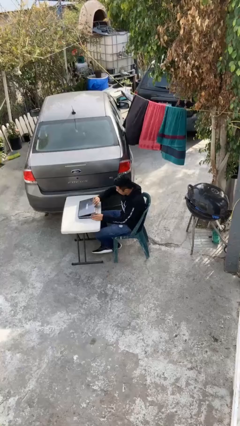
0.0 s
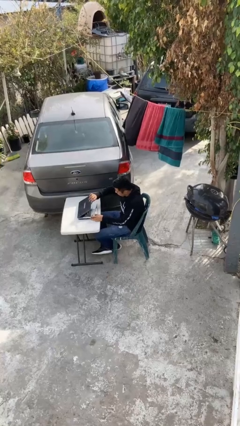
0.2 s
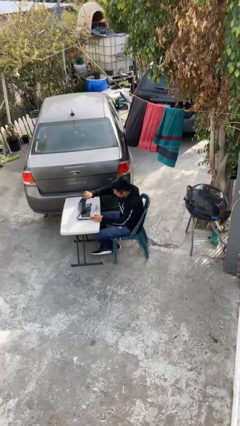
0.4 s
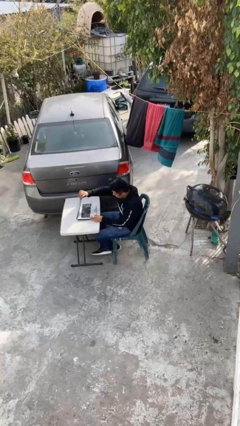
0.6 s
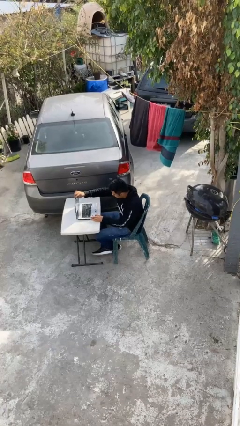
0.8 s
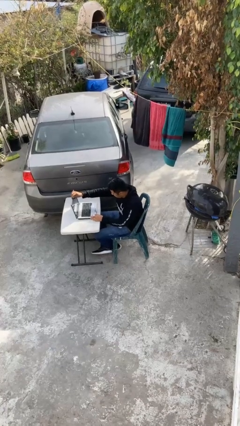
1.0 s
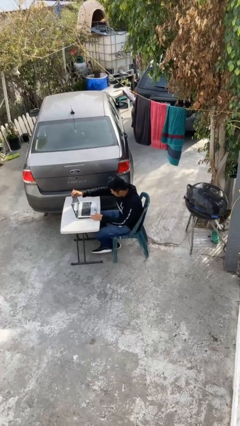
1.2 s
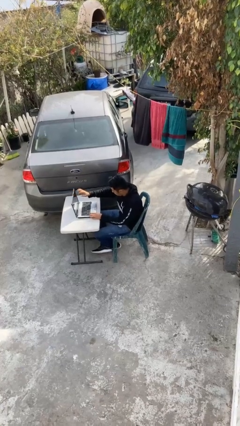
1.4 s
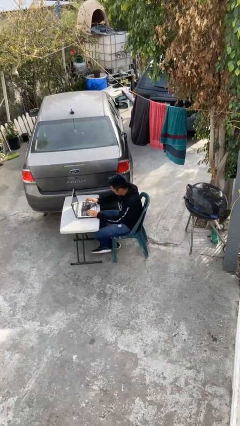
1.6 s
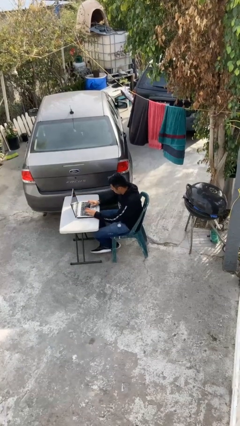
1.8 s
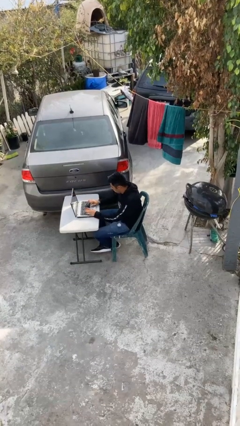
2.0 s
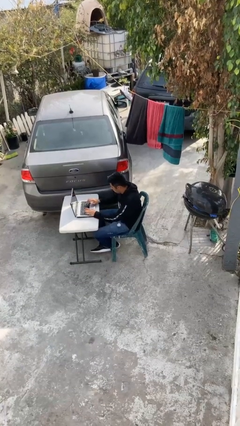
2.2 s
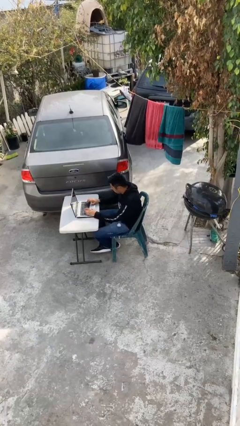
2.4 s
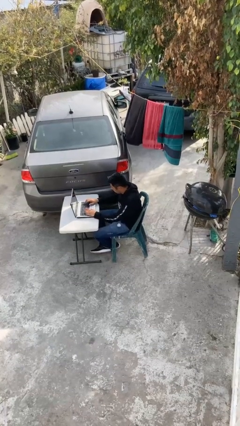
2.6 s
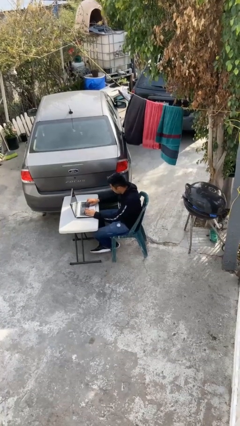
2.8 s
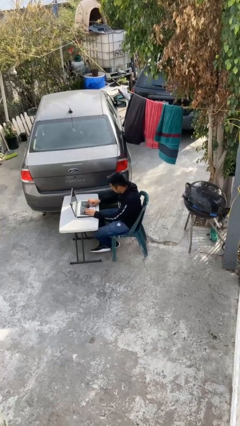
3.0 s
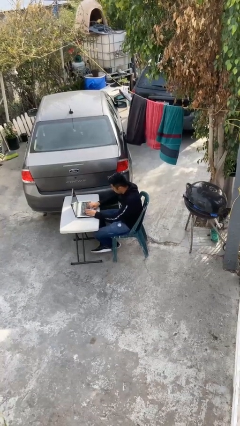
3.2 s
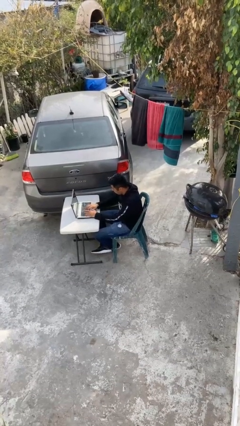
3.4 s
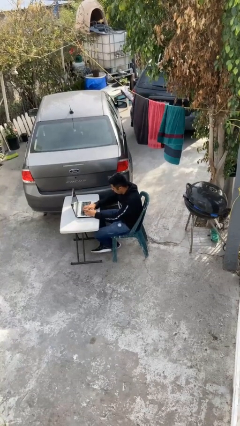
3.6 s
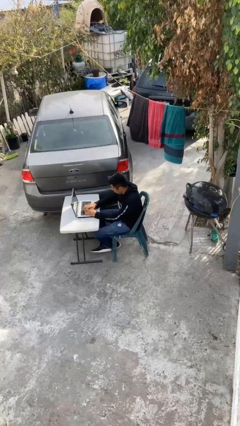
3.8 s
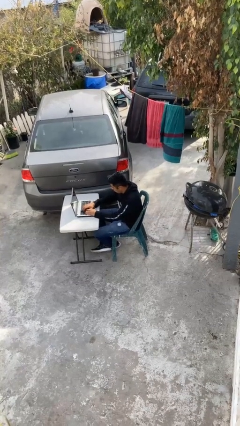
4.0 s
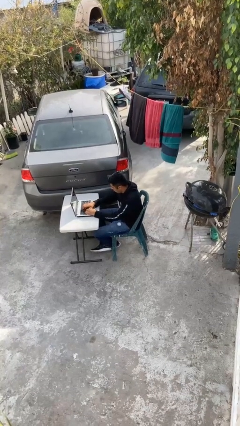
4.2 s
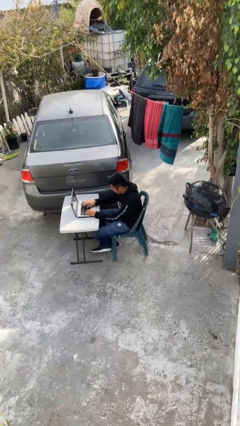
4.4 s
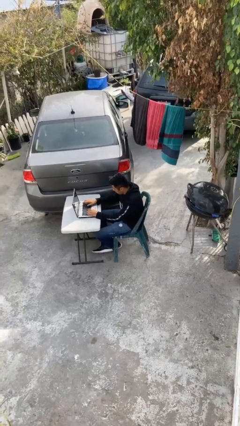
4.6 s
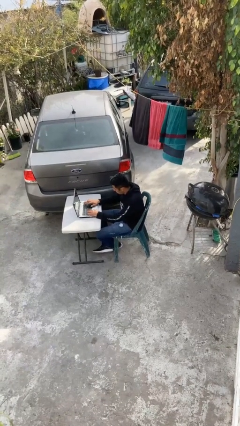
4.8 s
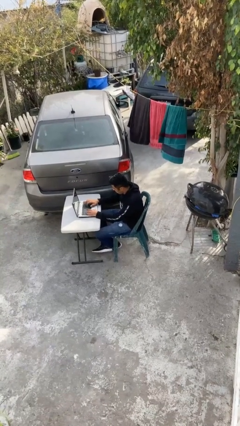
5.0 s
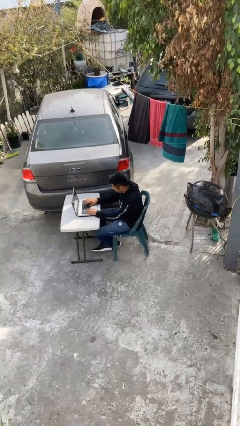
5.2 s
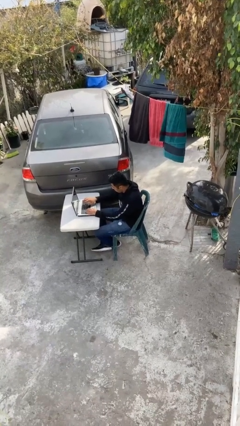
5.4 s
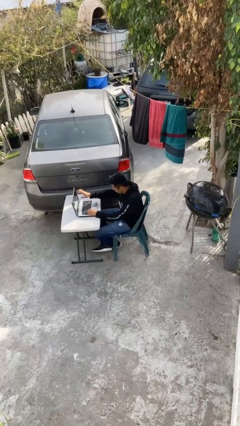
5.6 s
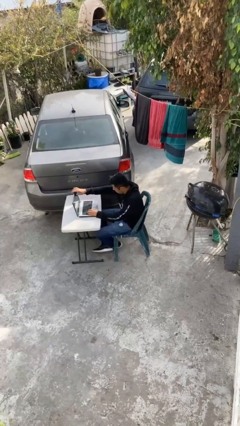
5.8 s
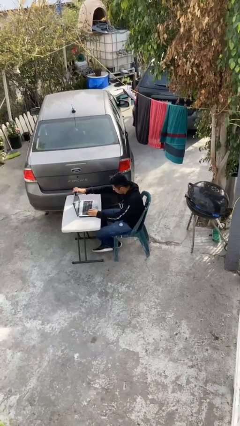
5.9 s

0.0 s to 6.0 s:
person interacts with laptop

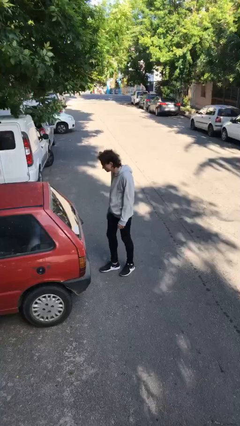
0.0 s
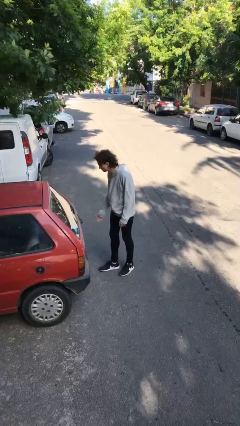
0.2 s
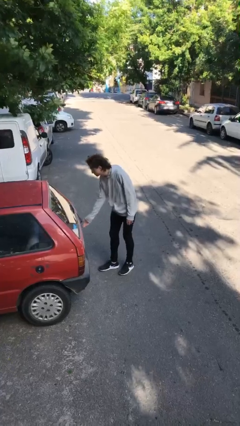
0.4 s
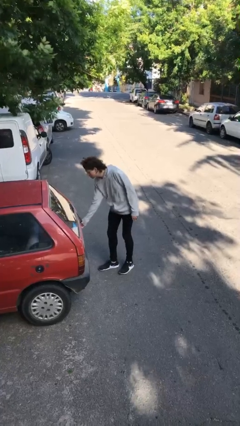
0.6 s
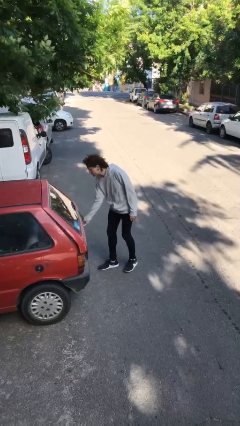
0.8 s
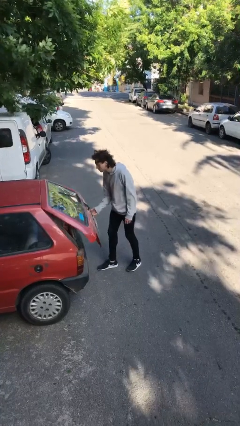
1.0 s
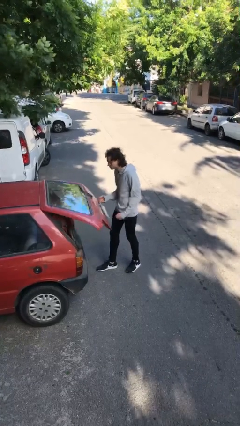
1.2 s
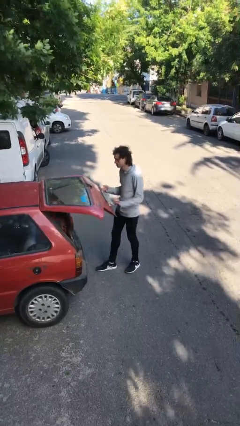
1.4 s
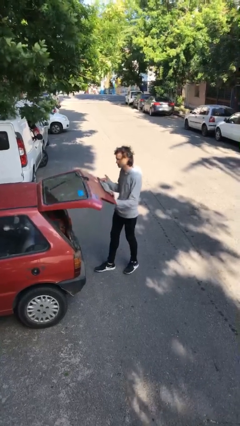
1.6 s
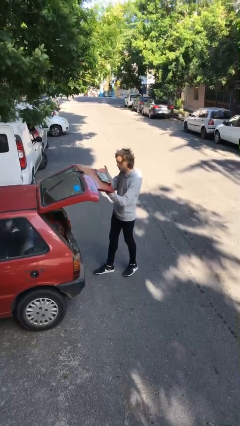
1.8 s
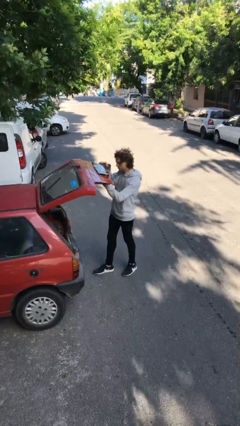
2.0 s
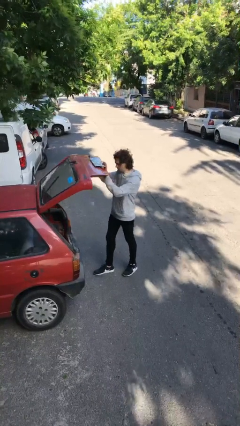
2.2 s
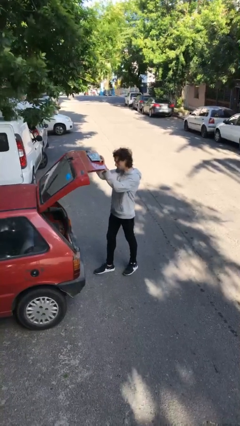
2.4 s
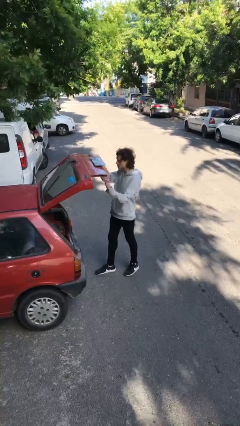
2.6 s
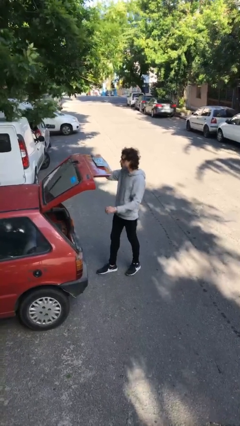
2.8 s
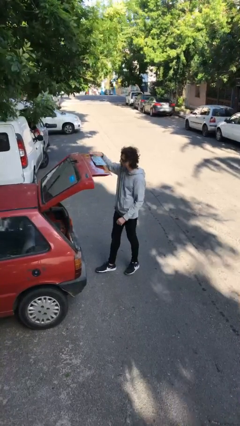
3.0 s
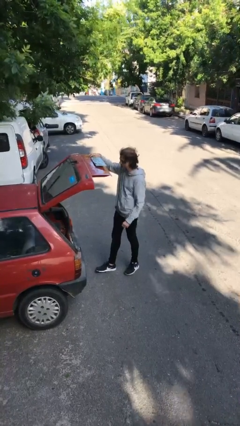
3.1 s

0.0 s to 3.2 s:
person opens car trunk

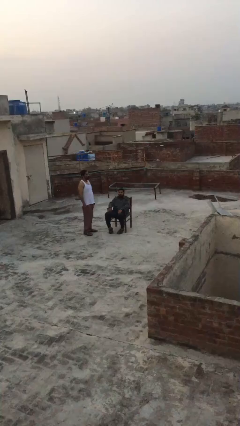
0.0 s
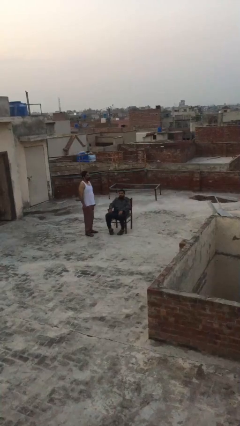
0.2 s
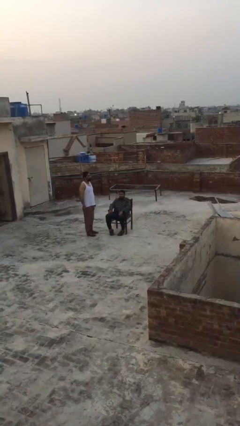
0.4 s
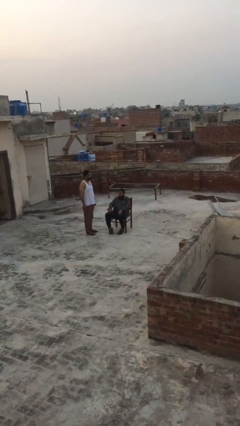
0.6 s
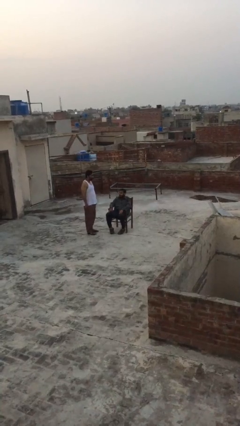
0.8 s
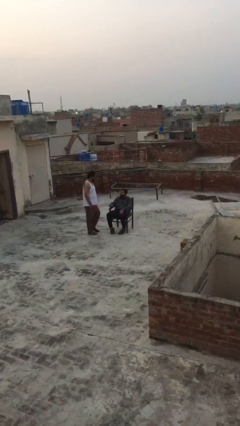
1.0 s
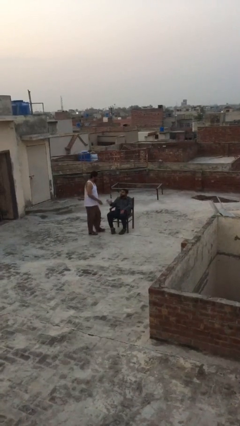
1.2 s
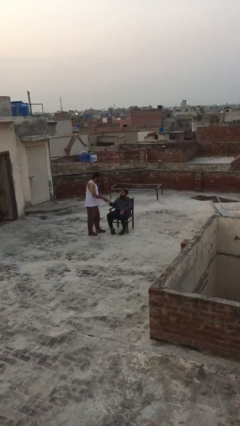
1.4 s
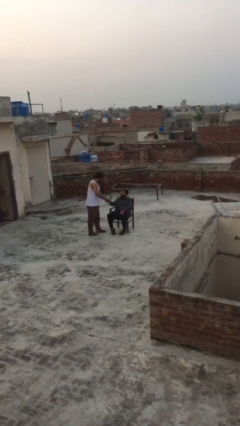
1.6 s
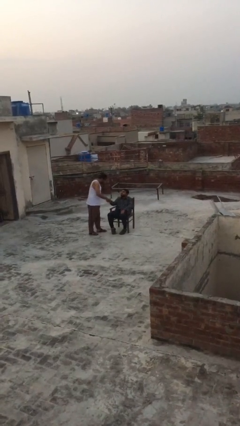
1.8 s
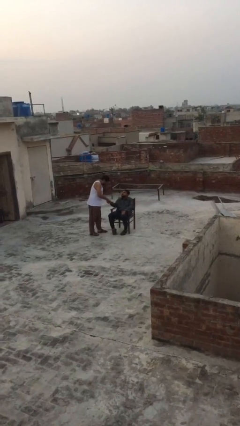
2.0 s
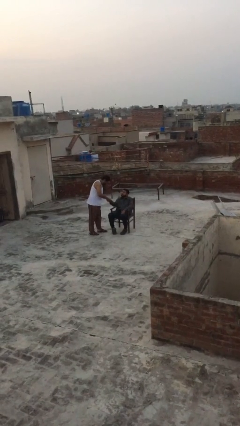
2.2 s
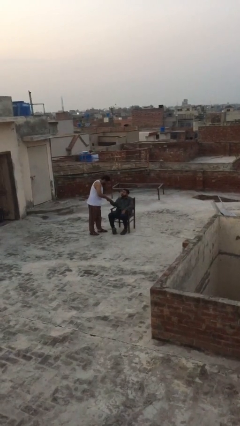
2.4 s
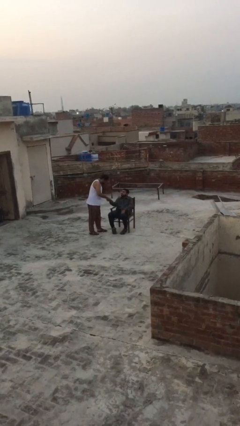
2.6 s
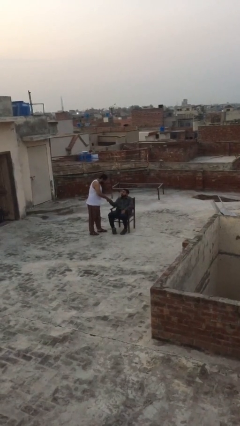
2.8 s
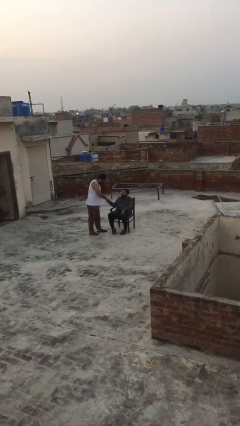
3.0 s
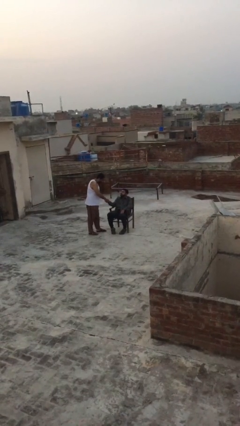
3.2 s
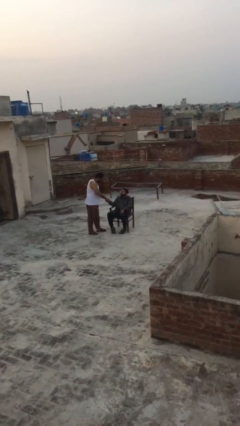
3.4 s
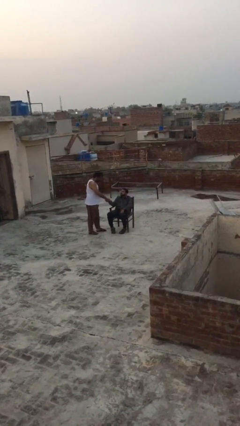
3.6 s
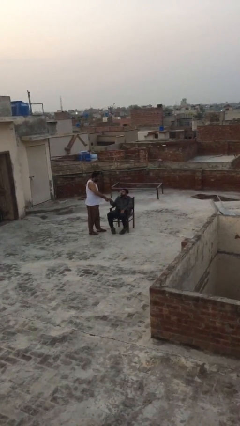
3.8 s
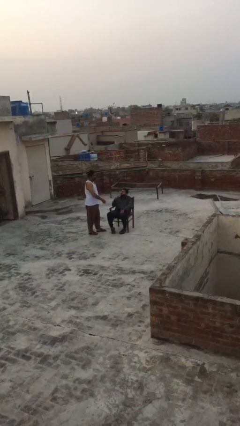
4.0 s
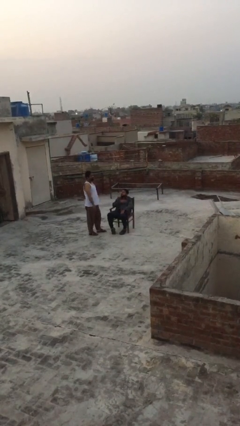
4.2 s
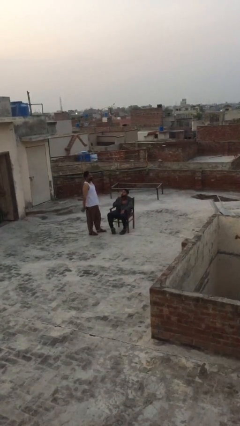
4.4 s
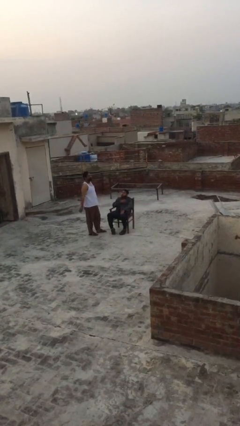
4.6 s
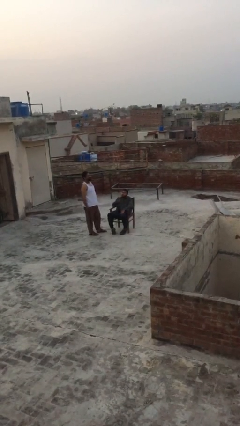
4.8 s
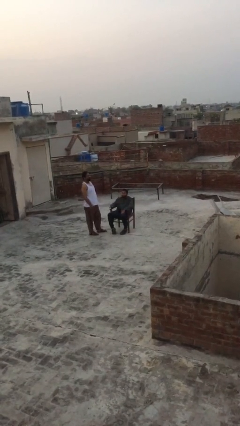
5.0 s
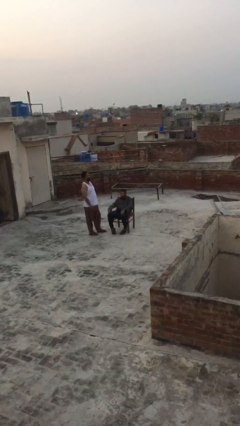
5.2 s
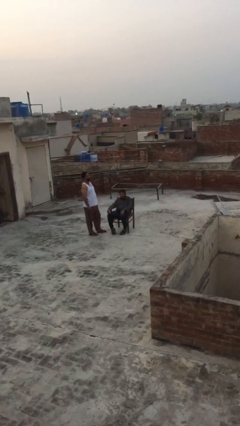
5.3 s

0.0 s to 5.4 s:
person shakes hand

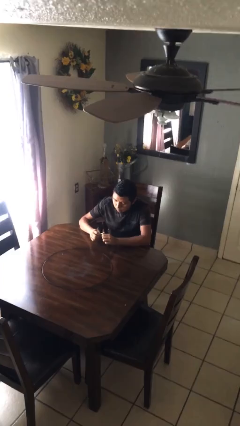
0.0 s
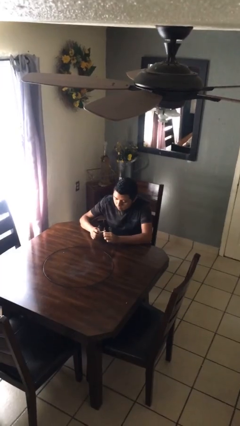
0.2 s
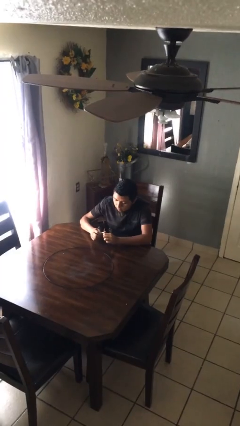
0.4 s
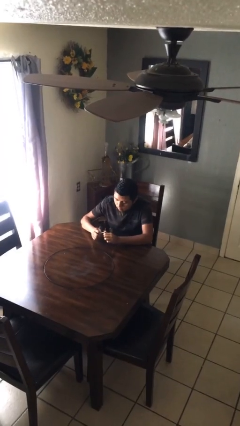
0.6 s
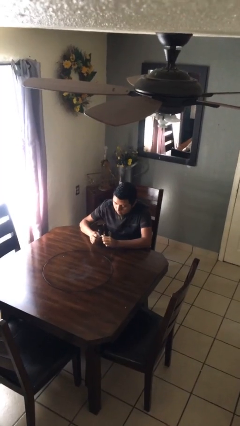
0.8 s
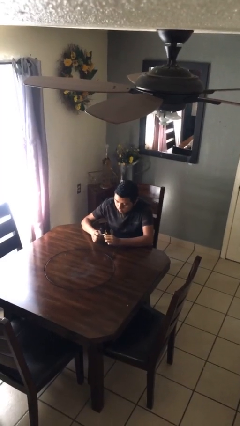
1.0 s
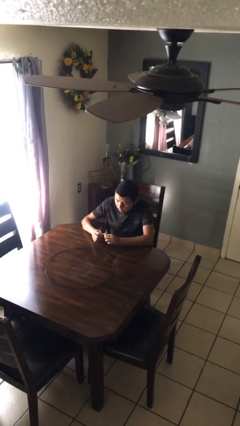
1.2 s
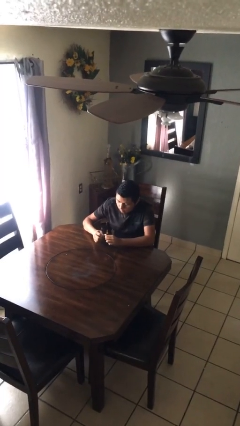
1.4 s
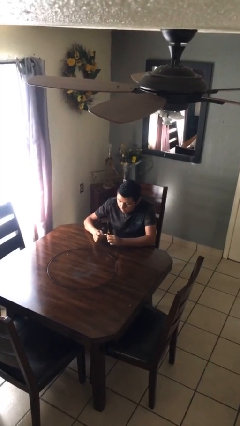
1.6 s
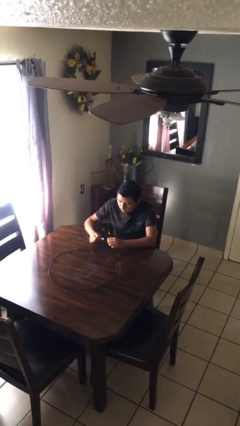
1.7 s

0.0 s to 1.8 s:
person files fingernails

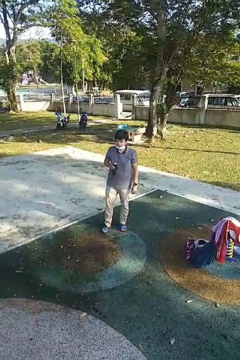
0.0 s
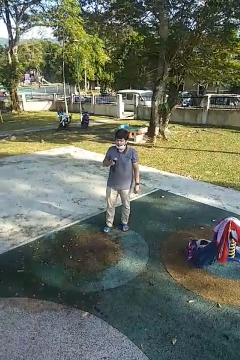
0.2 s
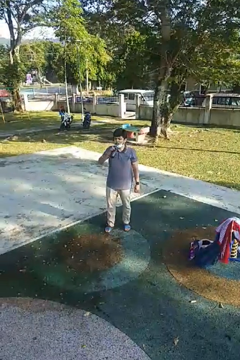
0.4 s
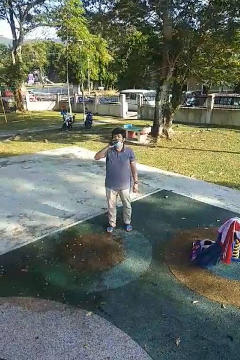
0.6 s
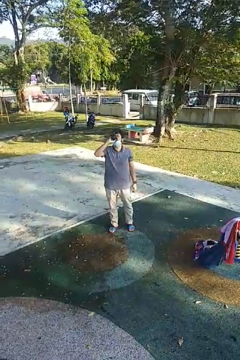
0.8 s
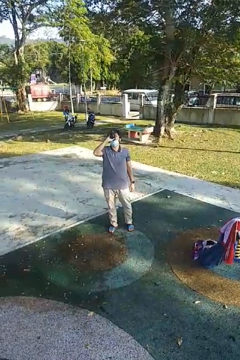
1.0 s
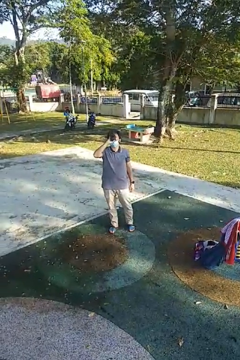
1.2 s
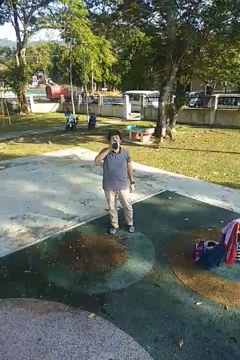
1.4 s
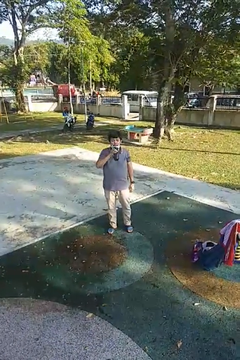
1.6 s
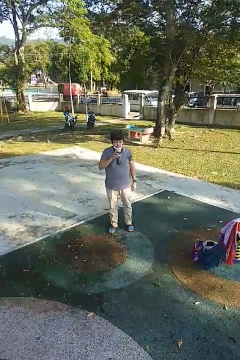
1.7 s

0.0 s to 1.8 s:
person drinks from bottle
